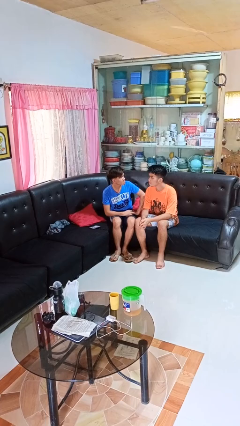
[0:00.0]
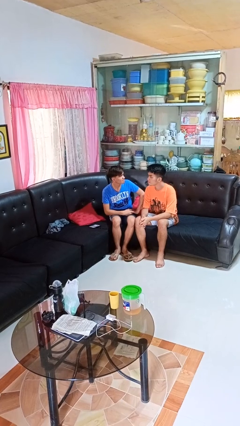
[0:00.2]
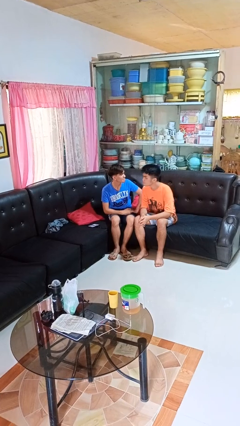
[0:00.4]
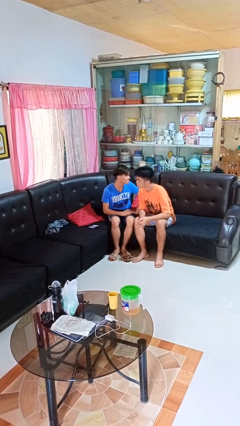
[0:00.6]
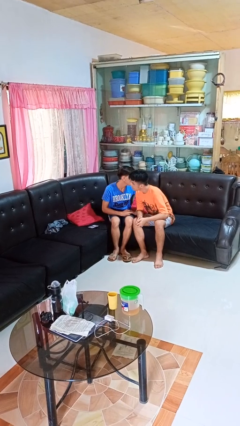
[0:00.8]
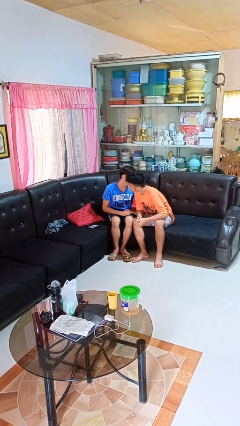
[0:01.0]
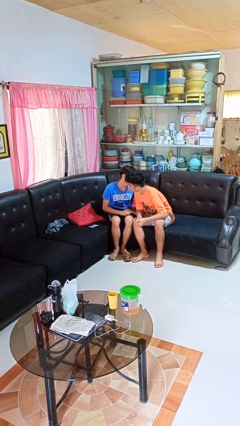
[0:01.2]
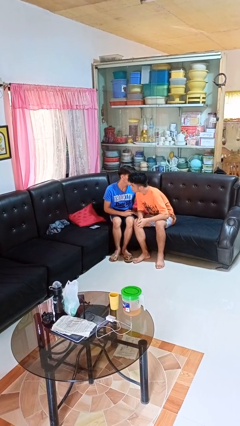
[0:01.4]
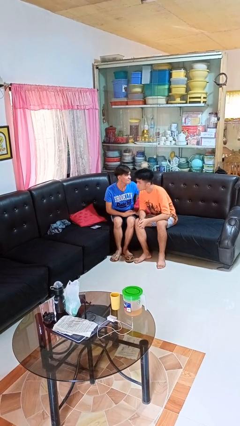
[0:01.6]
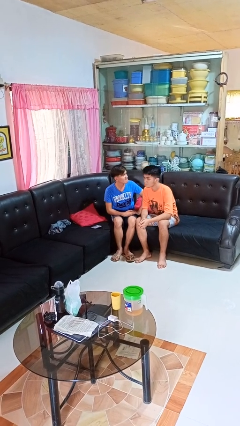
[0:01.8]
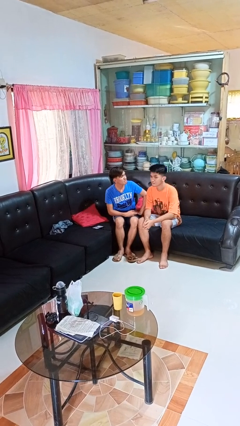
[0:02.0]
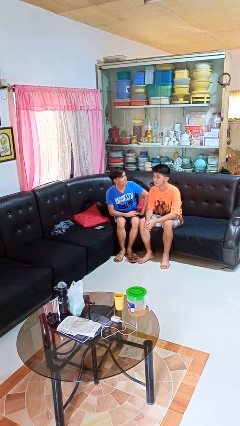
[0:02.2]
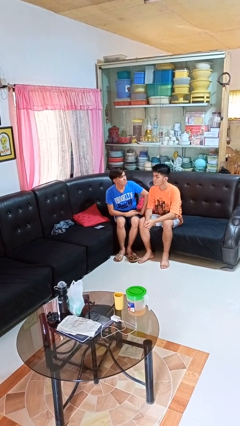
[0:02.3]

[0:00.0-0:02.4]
person kisses cheek of person

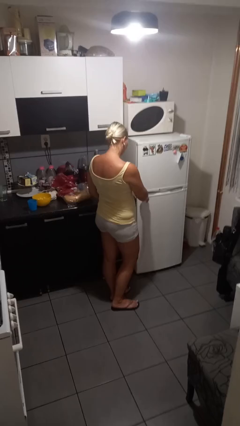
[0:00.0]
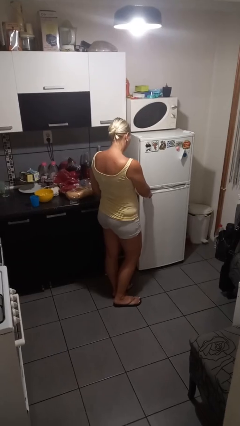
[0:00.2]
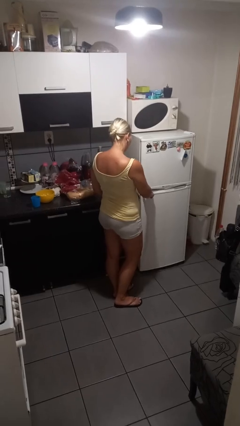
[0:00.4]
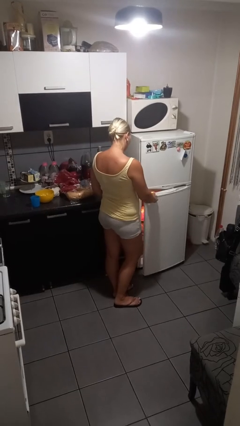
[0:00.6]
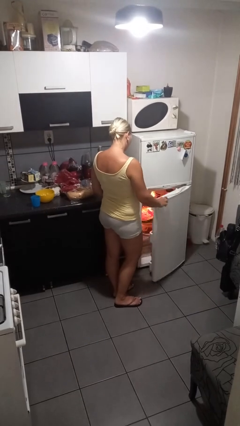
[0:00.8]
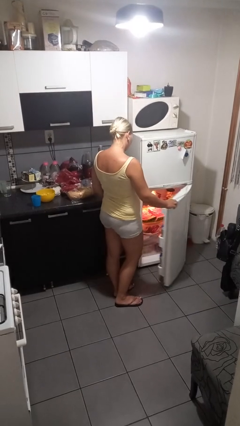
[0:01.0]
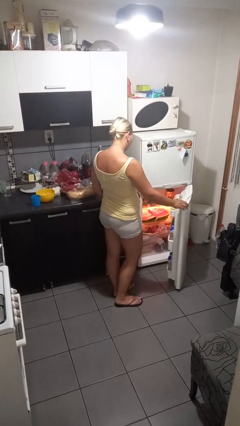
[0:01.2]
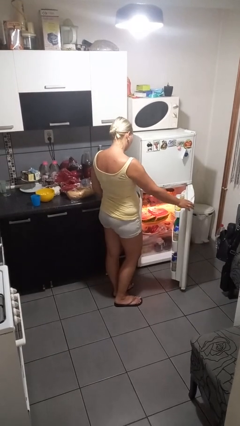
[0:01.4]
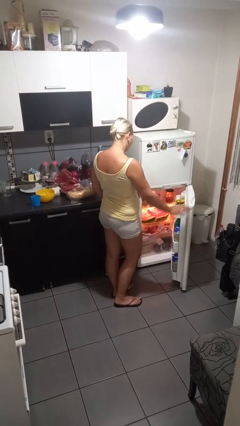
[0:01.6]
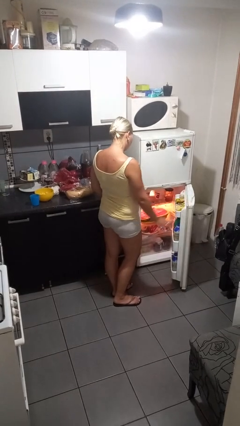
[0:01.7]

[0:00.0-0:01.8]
person opens refrigerator

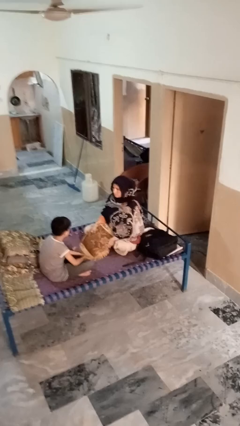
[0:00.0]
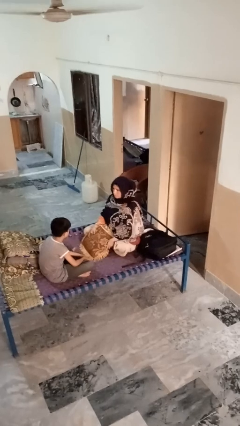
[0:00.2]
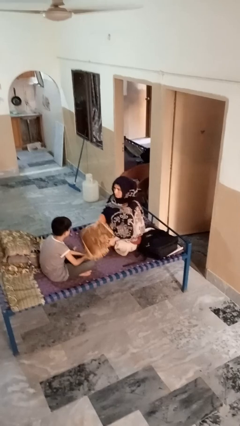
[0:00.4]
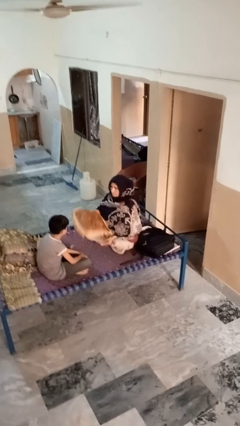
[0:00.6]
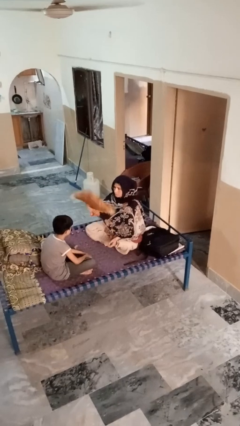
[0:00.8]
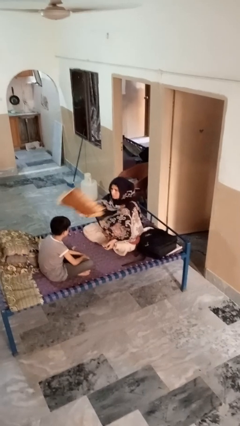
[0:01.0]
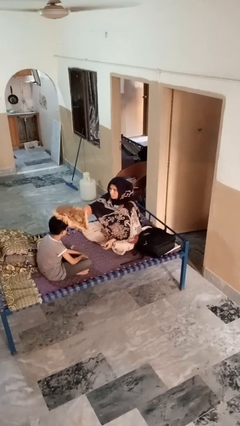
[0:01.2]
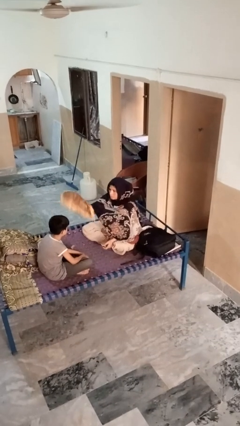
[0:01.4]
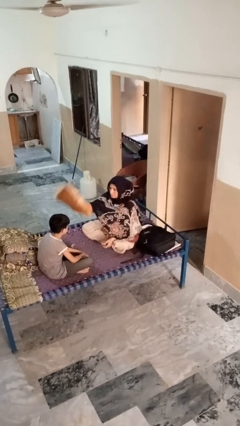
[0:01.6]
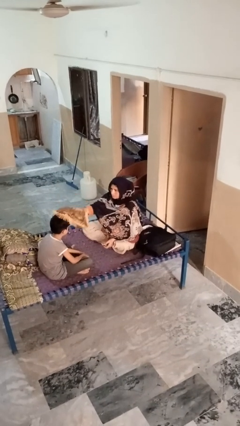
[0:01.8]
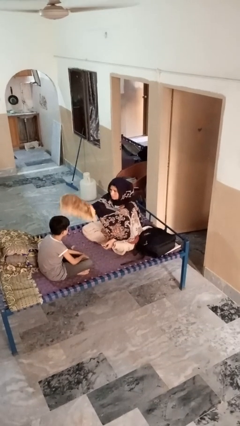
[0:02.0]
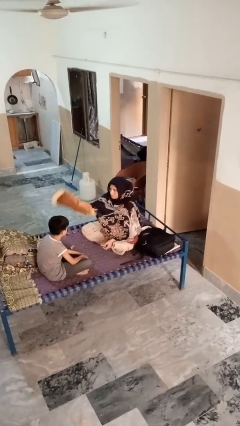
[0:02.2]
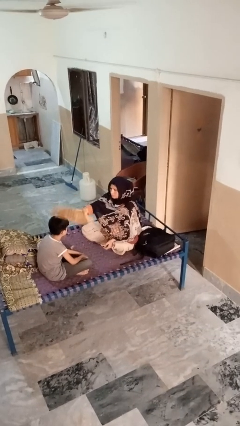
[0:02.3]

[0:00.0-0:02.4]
person hits person with pillow

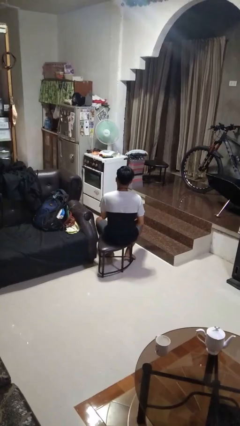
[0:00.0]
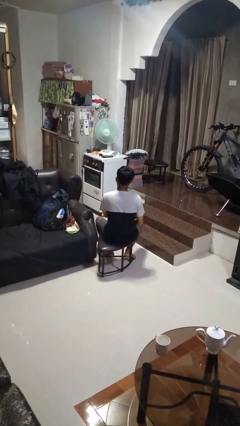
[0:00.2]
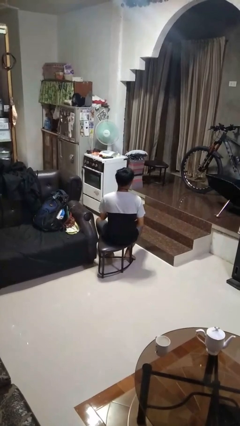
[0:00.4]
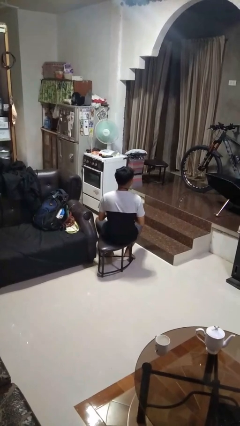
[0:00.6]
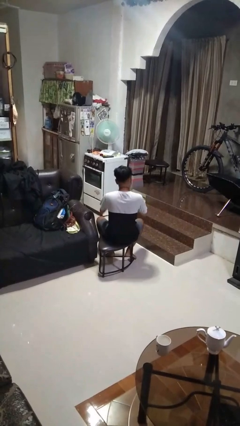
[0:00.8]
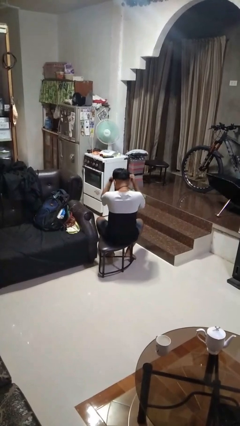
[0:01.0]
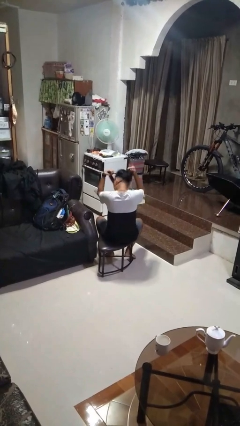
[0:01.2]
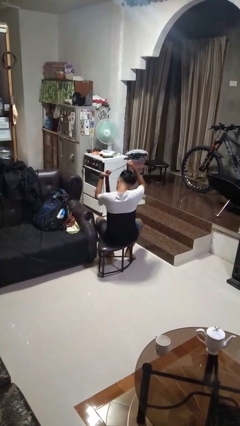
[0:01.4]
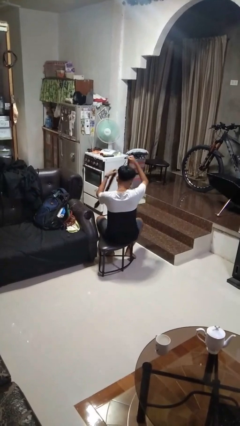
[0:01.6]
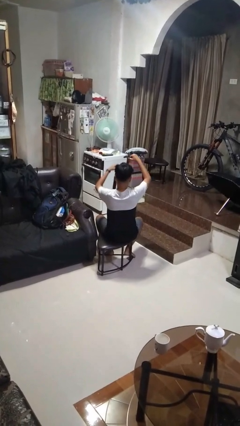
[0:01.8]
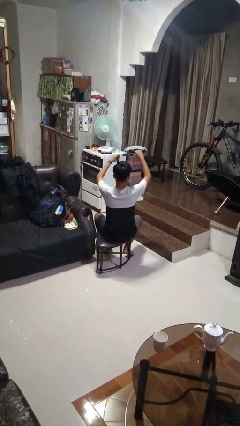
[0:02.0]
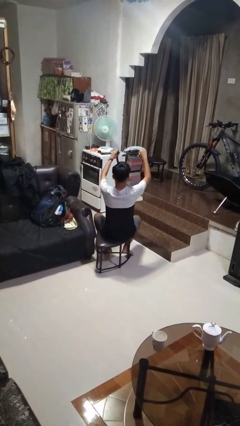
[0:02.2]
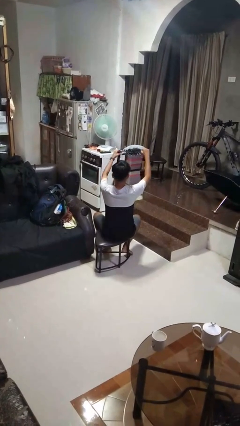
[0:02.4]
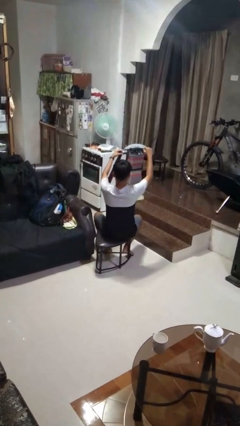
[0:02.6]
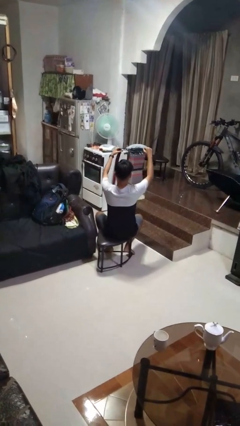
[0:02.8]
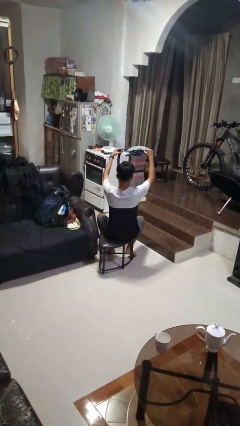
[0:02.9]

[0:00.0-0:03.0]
person takes off necktie

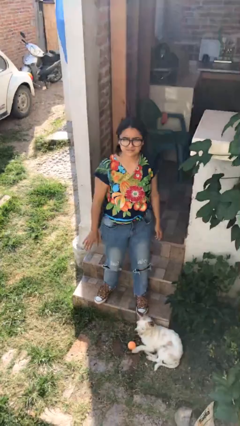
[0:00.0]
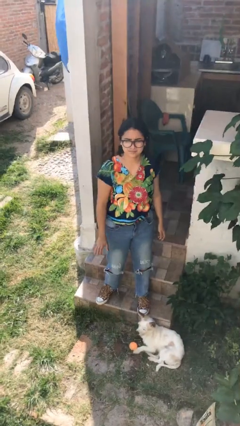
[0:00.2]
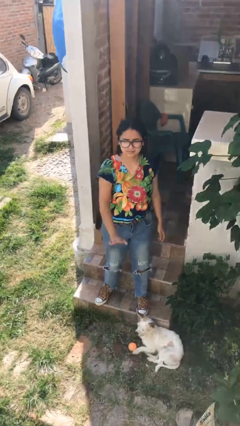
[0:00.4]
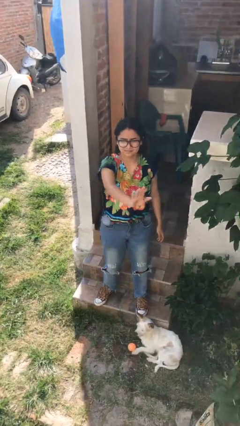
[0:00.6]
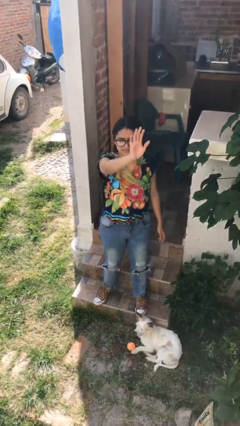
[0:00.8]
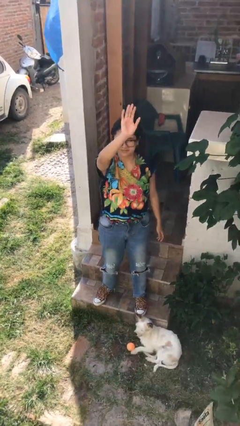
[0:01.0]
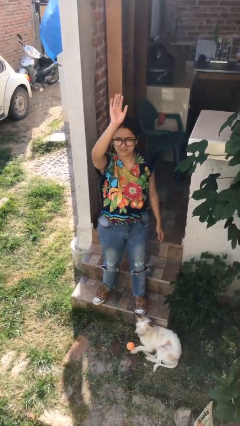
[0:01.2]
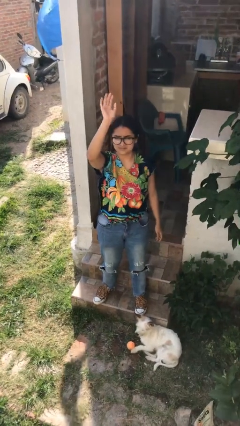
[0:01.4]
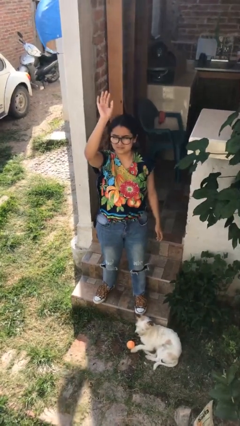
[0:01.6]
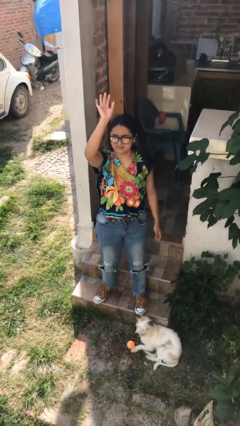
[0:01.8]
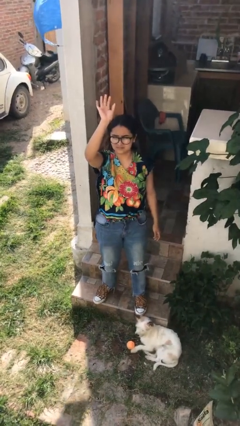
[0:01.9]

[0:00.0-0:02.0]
person gestures swipe up

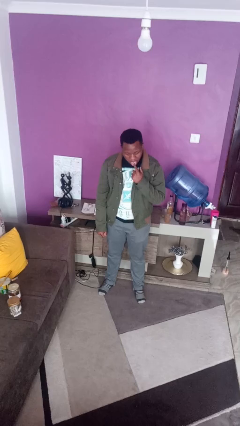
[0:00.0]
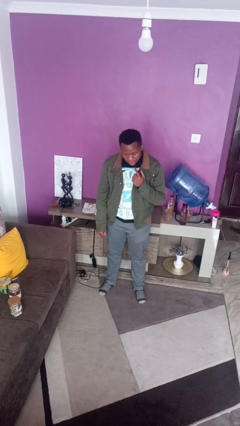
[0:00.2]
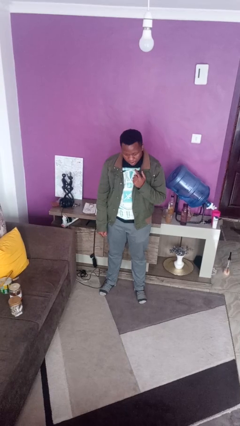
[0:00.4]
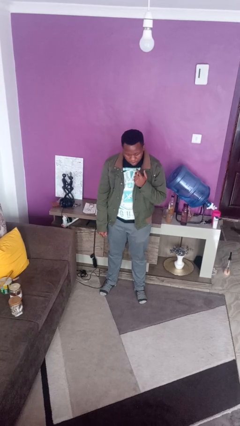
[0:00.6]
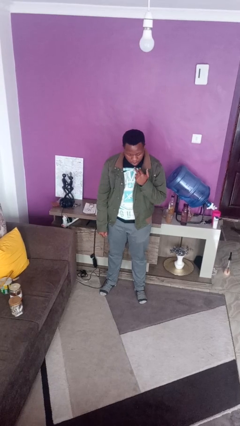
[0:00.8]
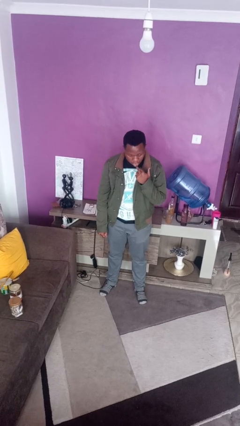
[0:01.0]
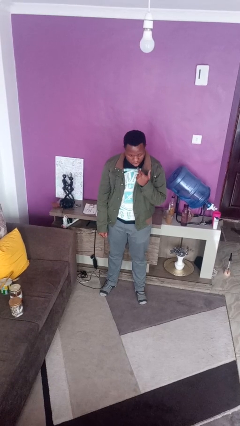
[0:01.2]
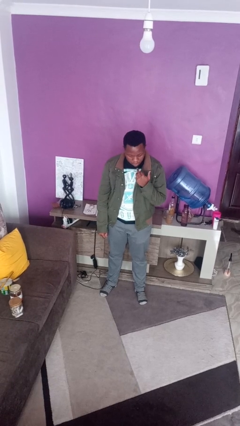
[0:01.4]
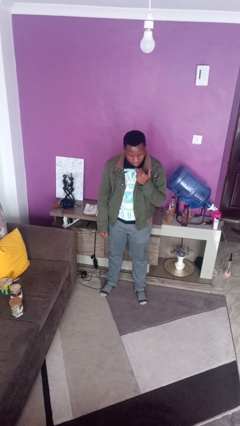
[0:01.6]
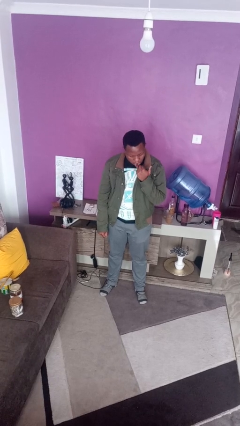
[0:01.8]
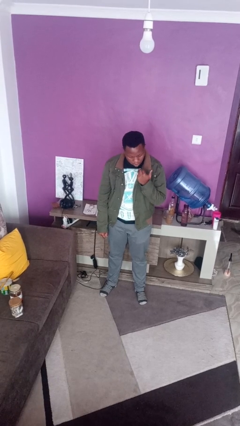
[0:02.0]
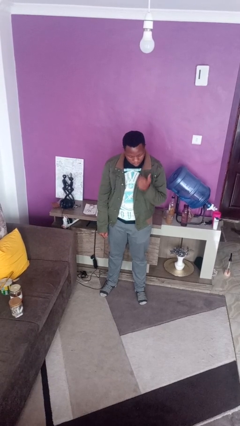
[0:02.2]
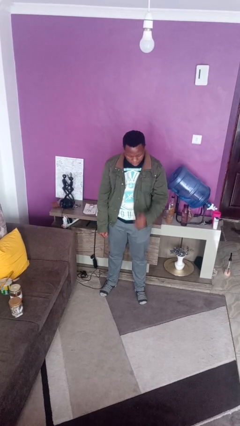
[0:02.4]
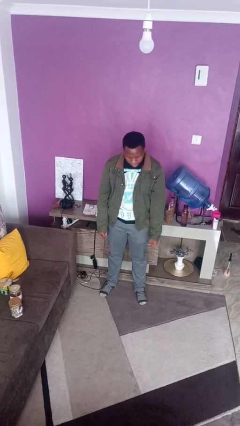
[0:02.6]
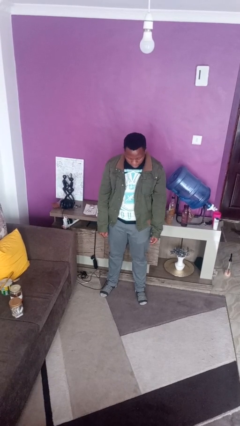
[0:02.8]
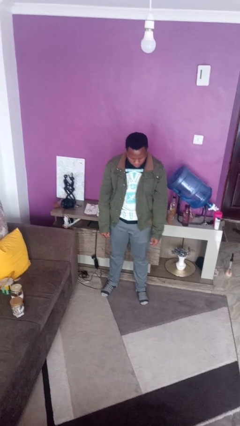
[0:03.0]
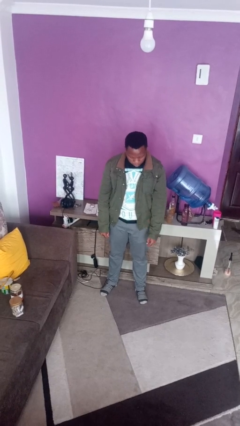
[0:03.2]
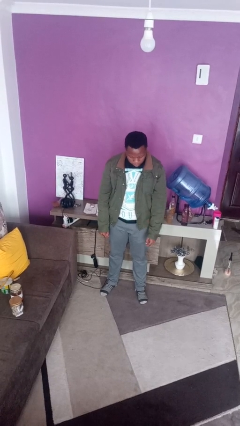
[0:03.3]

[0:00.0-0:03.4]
person licks fingers

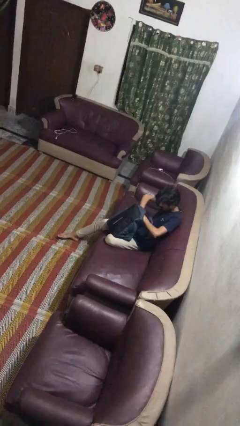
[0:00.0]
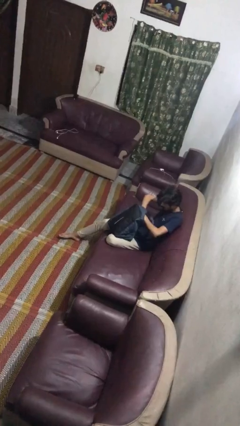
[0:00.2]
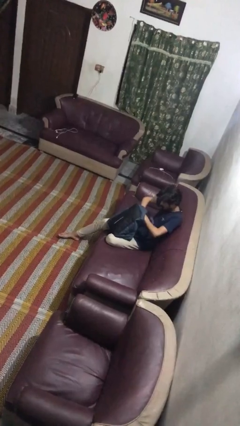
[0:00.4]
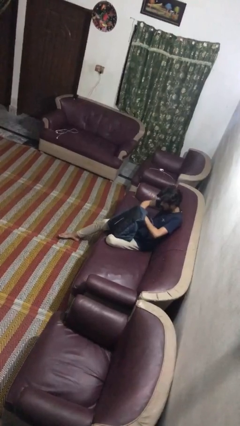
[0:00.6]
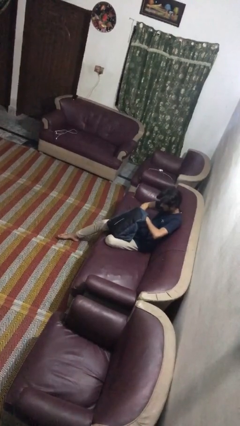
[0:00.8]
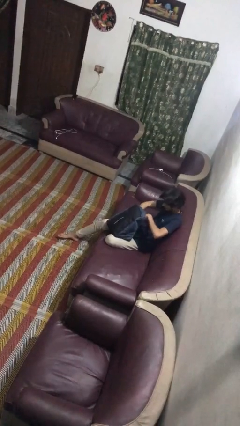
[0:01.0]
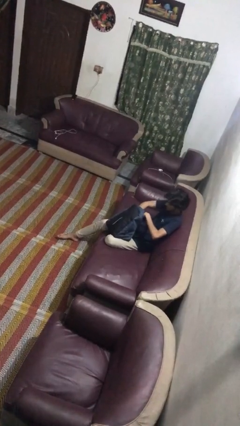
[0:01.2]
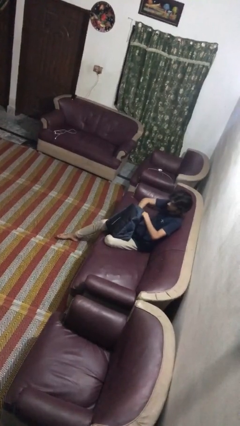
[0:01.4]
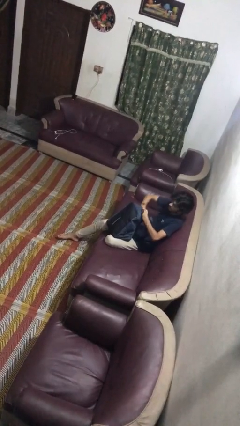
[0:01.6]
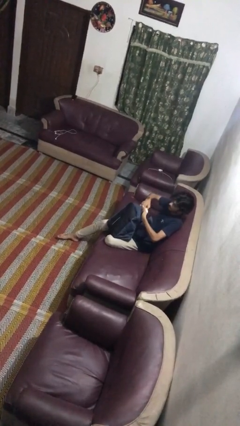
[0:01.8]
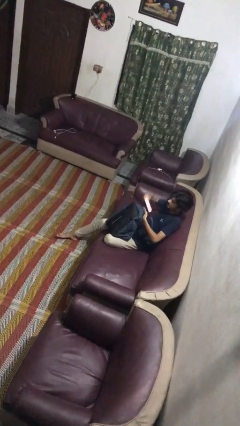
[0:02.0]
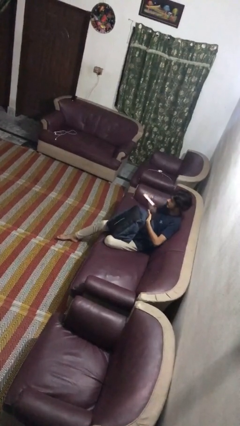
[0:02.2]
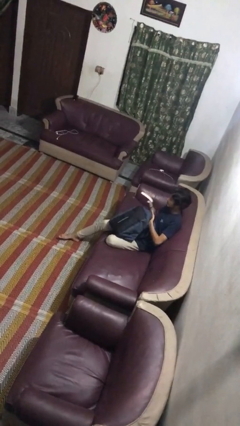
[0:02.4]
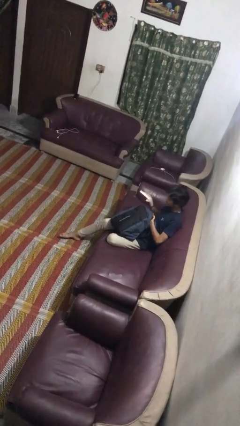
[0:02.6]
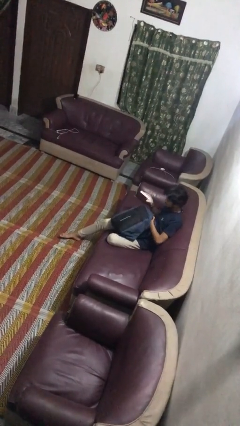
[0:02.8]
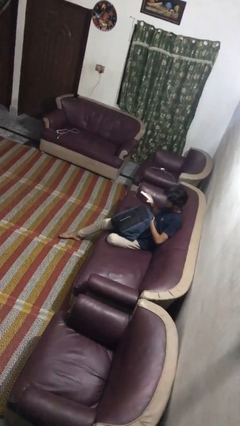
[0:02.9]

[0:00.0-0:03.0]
person takes object from backpack
